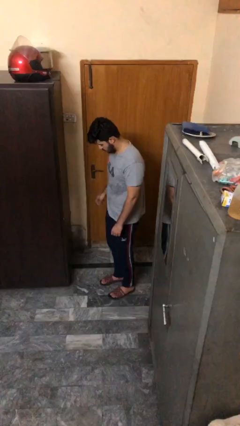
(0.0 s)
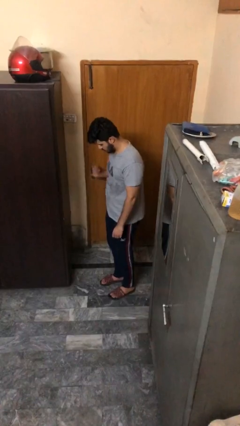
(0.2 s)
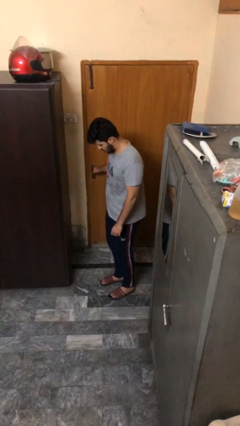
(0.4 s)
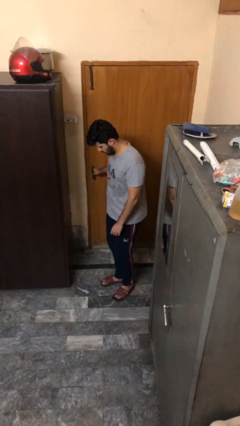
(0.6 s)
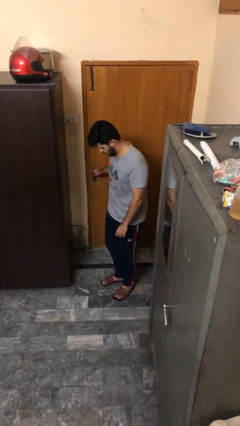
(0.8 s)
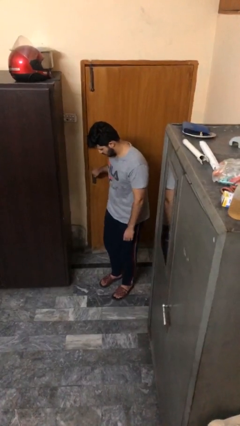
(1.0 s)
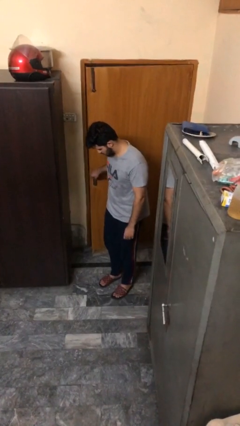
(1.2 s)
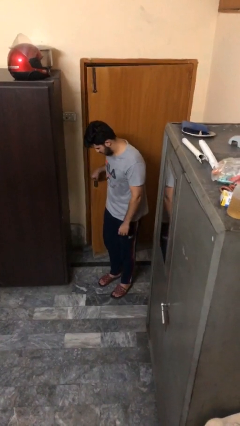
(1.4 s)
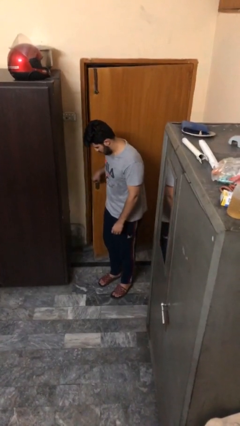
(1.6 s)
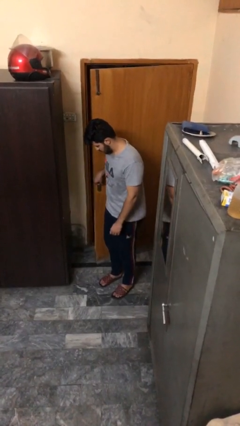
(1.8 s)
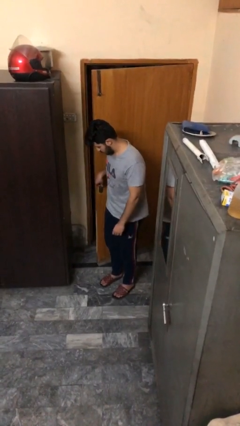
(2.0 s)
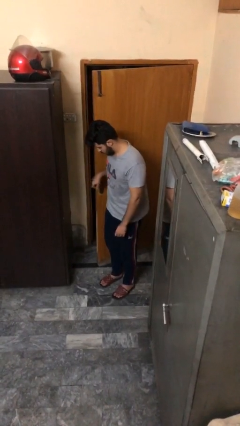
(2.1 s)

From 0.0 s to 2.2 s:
person opens facility door

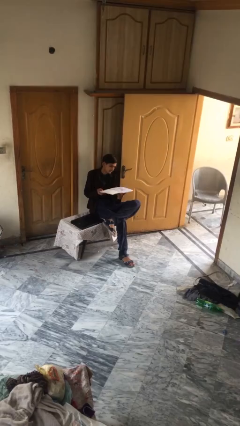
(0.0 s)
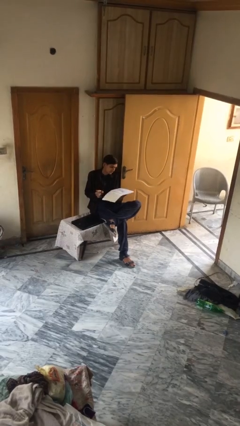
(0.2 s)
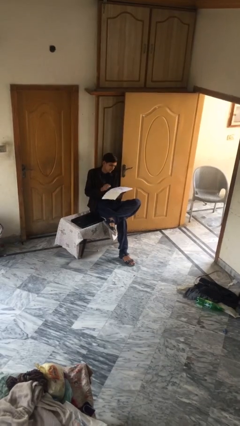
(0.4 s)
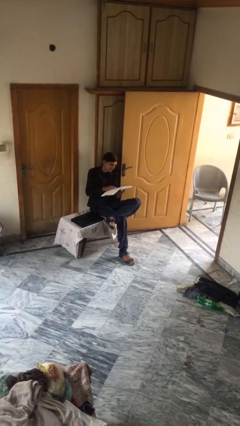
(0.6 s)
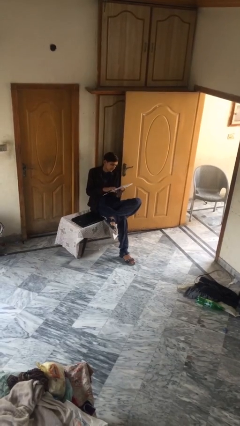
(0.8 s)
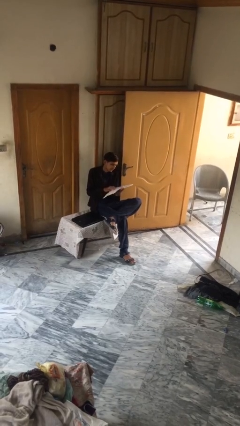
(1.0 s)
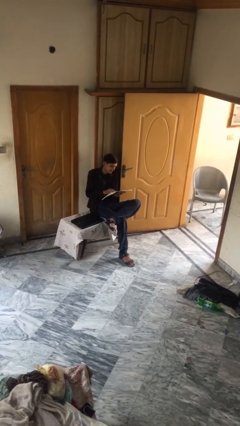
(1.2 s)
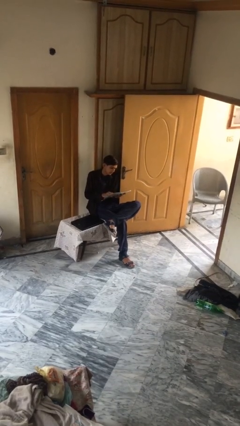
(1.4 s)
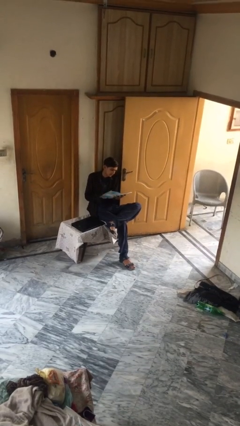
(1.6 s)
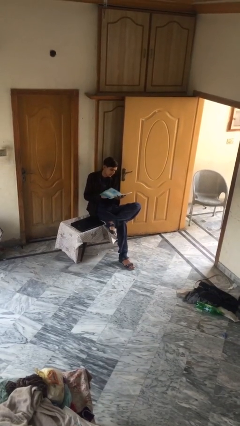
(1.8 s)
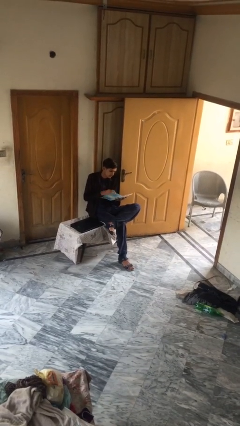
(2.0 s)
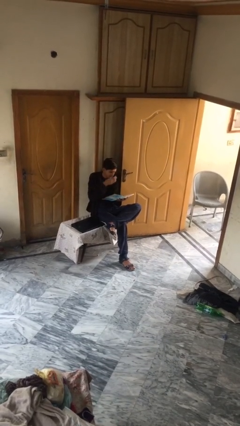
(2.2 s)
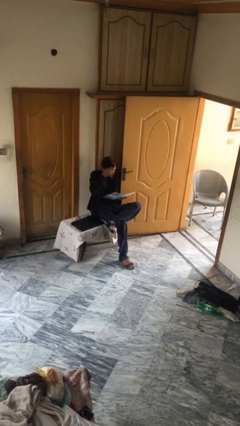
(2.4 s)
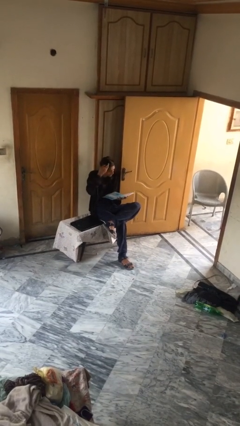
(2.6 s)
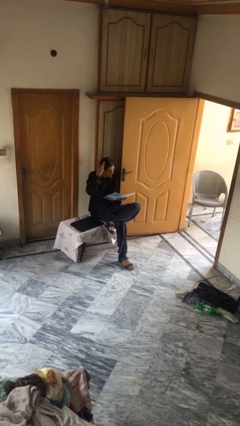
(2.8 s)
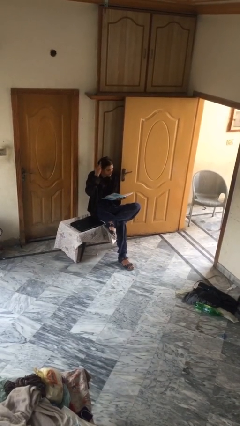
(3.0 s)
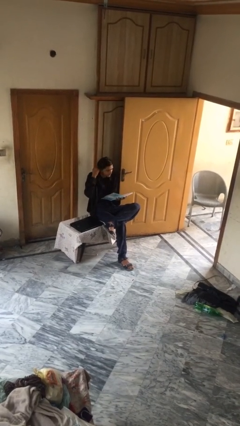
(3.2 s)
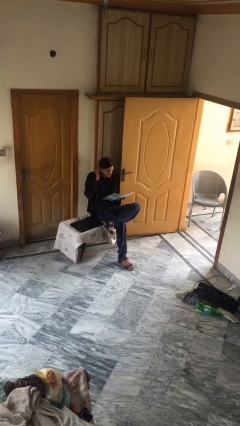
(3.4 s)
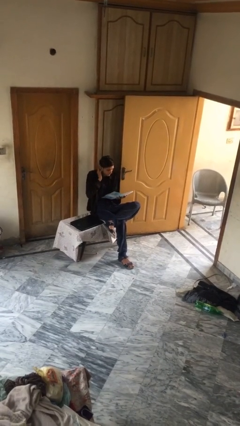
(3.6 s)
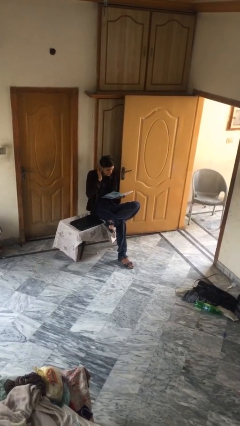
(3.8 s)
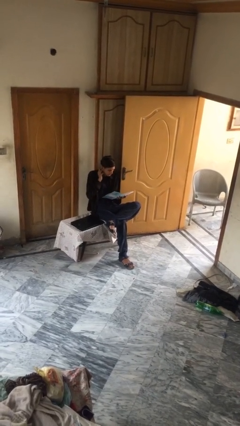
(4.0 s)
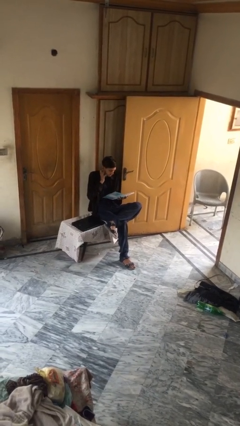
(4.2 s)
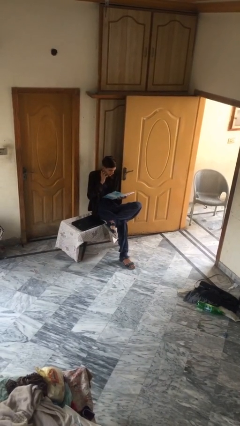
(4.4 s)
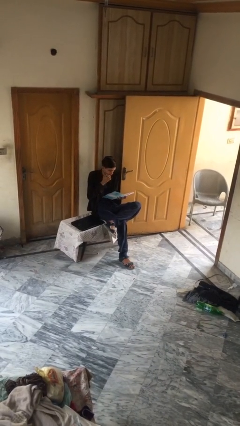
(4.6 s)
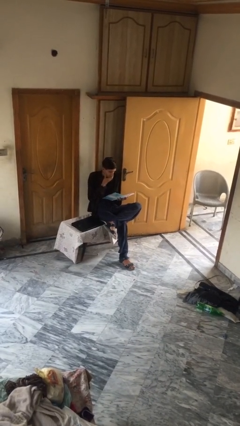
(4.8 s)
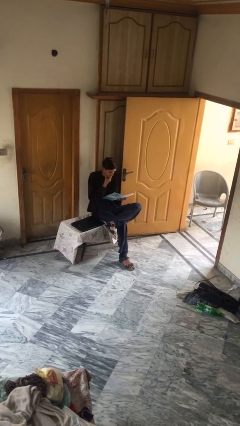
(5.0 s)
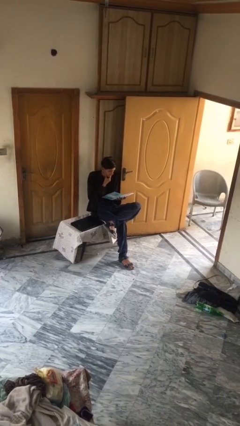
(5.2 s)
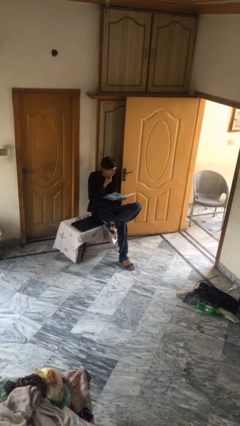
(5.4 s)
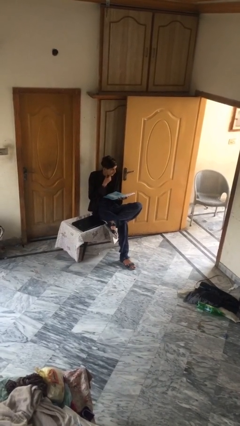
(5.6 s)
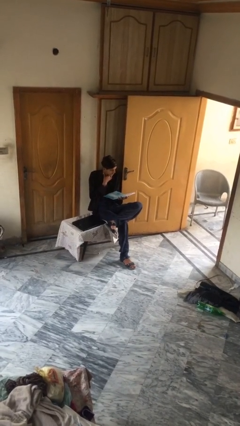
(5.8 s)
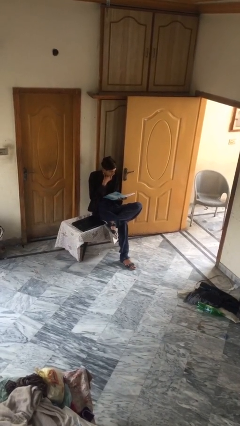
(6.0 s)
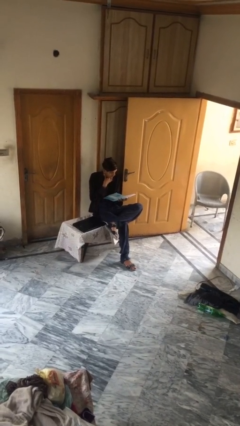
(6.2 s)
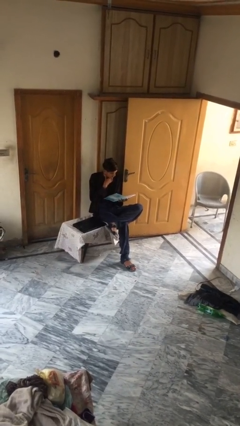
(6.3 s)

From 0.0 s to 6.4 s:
person reads document

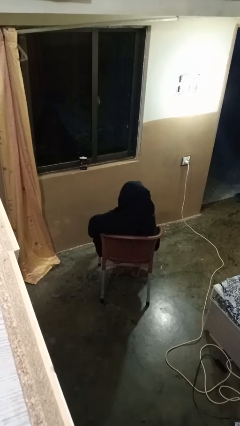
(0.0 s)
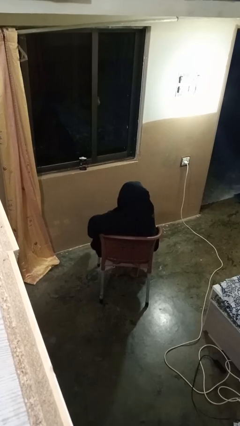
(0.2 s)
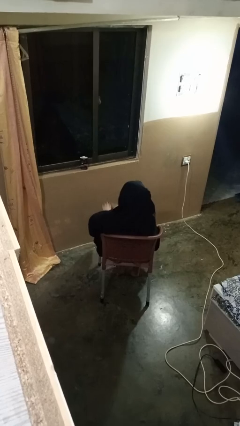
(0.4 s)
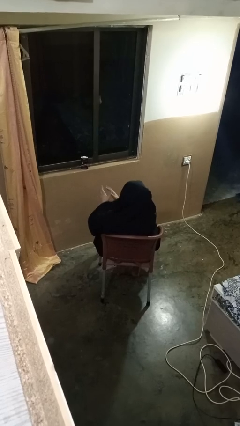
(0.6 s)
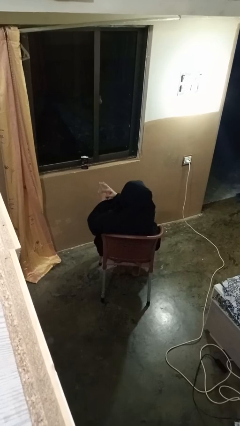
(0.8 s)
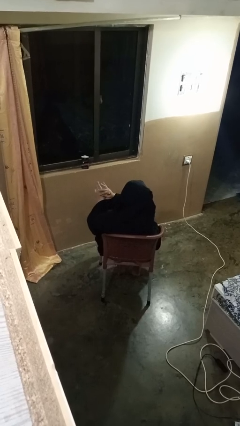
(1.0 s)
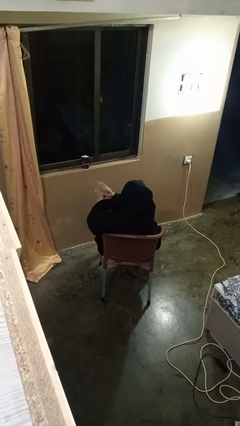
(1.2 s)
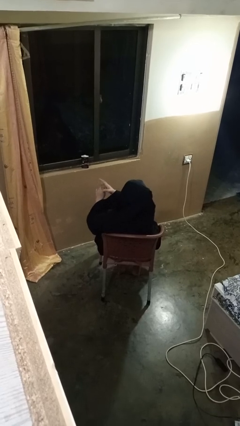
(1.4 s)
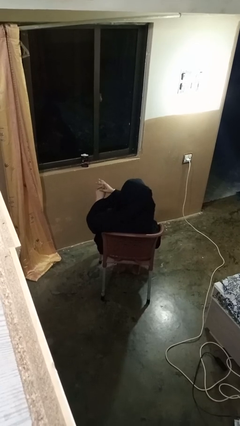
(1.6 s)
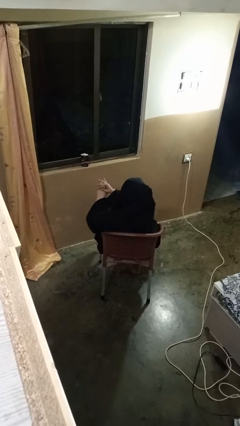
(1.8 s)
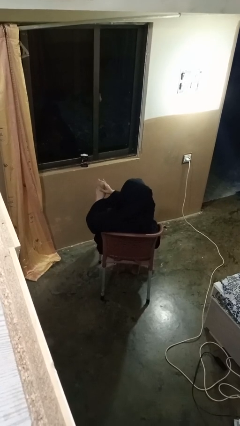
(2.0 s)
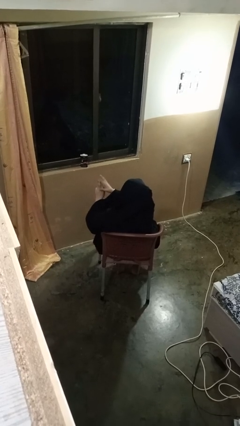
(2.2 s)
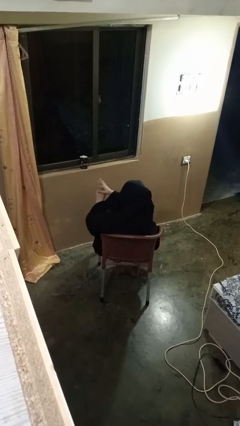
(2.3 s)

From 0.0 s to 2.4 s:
person cracks knuckles

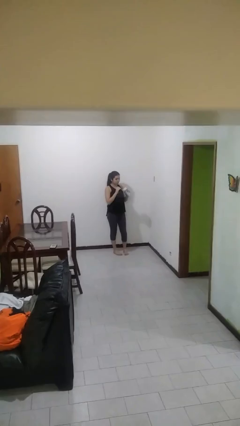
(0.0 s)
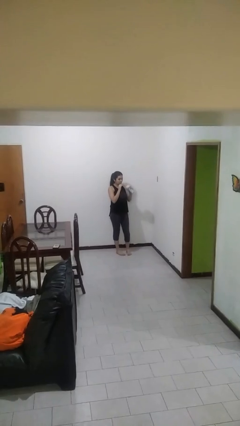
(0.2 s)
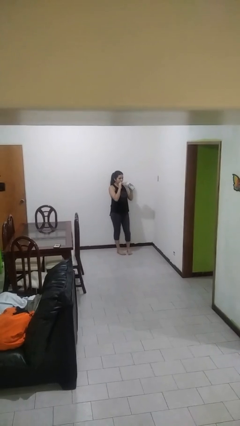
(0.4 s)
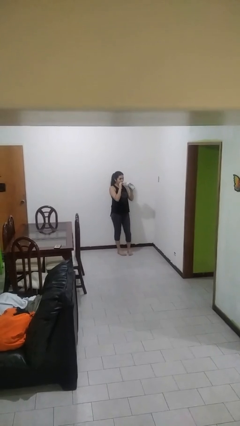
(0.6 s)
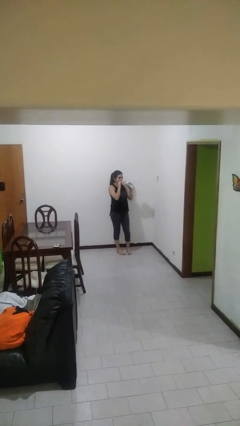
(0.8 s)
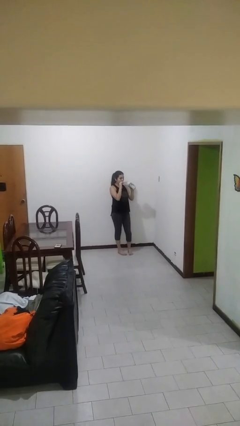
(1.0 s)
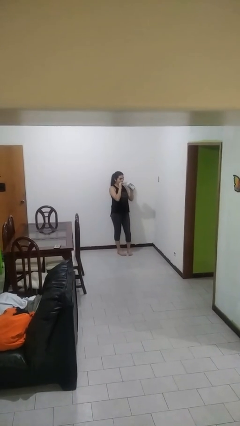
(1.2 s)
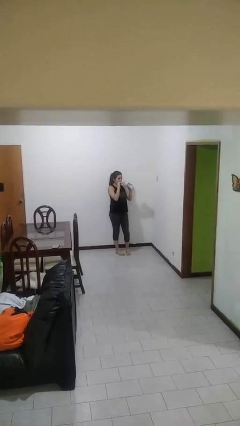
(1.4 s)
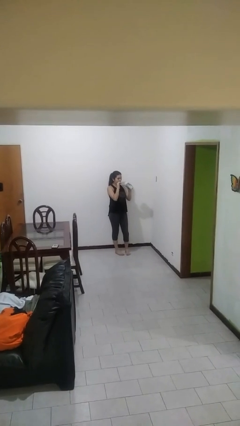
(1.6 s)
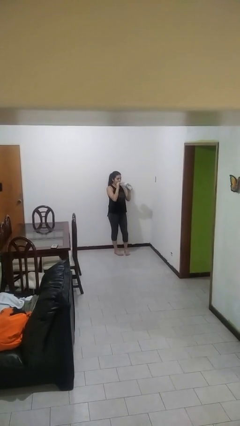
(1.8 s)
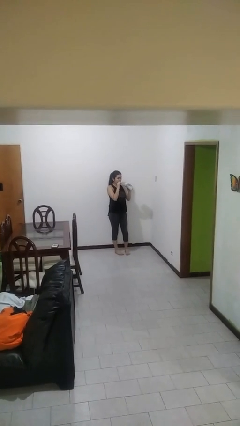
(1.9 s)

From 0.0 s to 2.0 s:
person drinks from straw

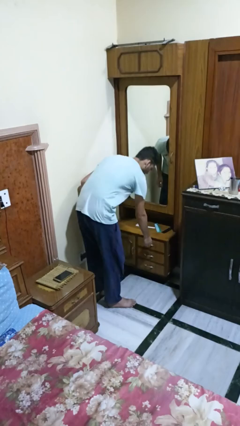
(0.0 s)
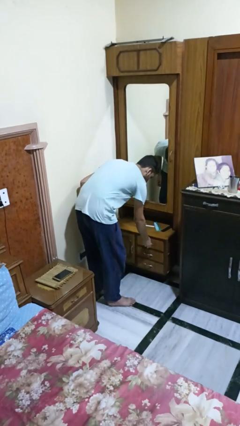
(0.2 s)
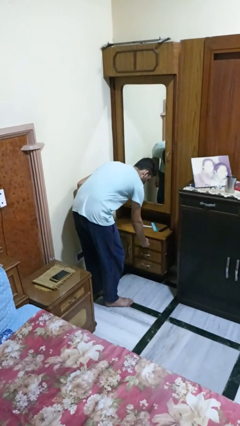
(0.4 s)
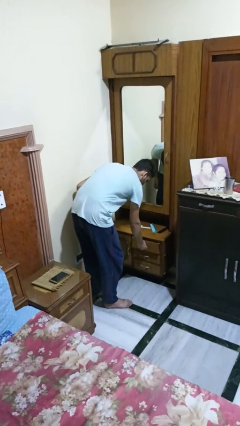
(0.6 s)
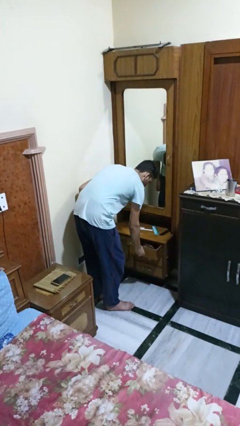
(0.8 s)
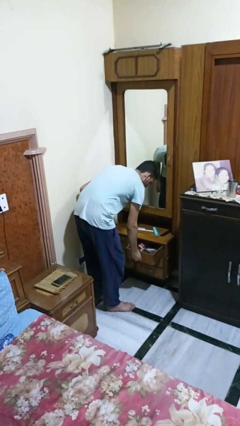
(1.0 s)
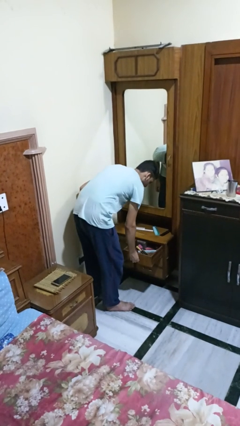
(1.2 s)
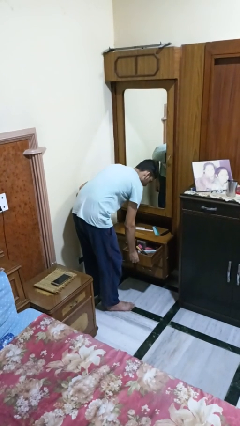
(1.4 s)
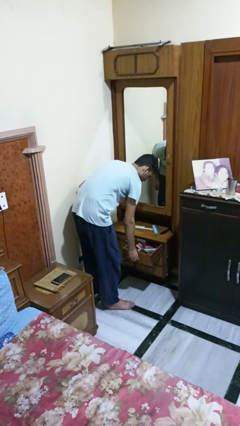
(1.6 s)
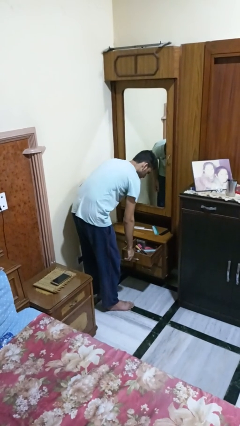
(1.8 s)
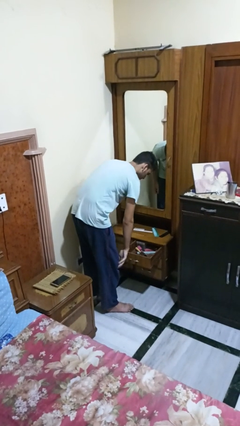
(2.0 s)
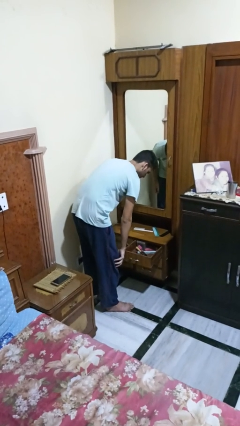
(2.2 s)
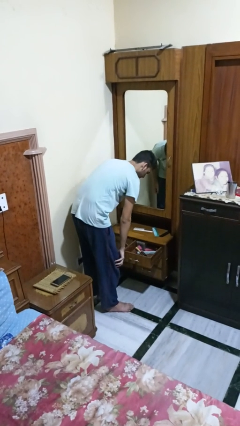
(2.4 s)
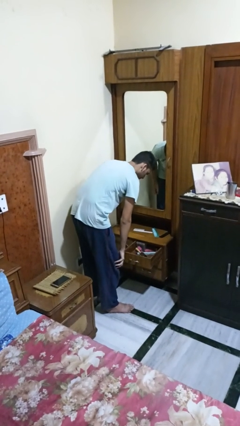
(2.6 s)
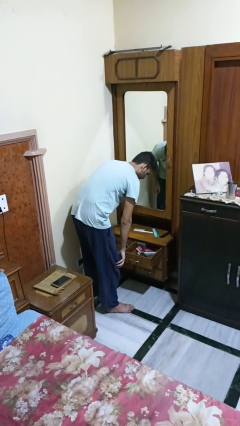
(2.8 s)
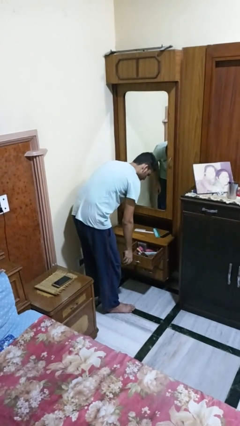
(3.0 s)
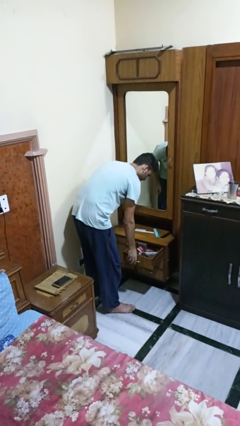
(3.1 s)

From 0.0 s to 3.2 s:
person opens dresser drawer

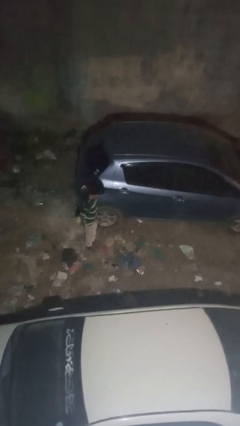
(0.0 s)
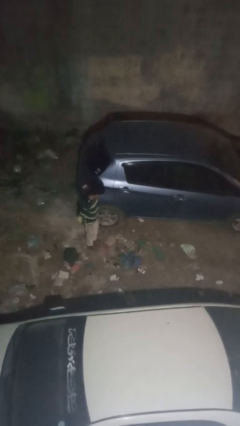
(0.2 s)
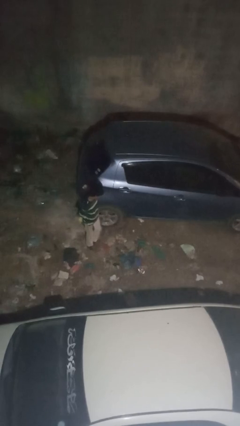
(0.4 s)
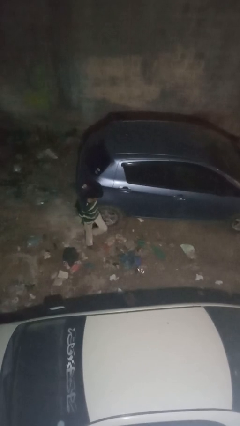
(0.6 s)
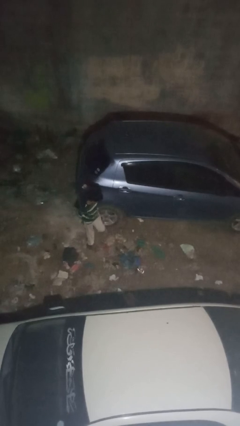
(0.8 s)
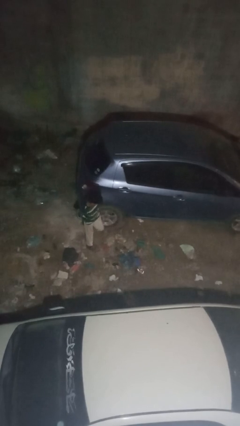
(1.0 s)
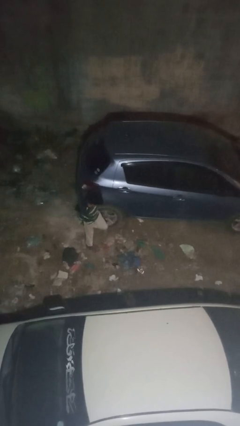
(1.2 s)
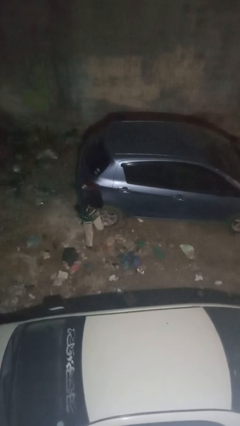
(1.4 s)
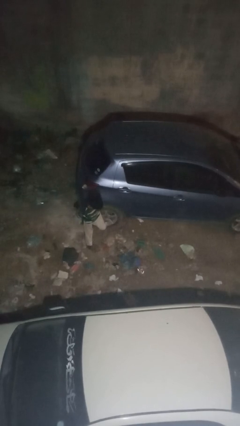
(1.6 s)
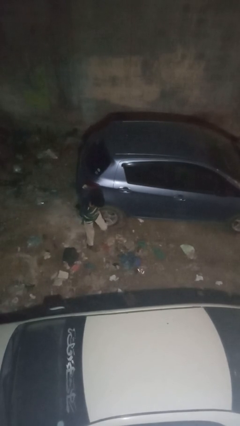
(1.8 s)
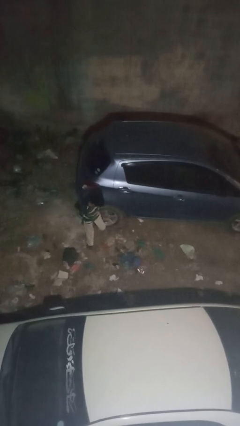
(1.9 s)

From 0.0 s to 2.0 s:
person kicks car tires
